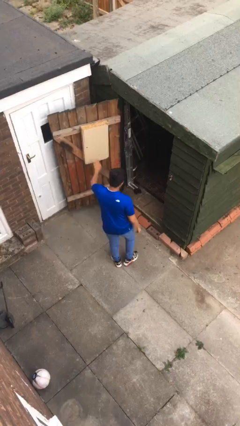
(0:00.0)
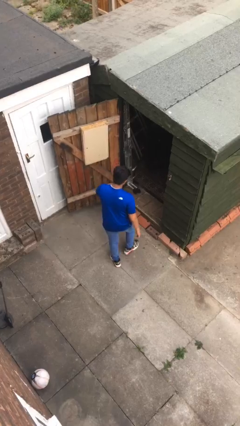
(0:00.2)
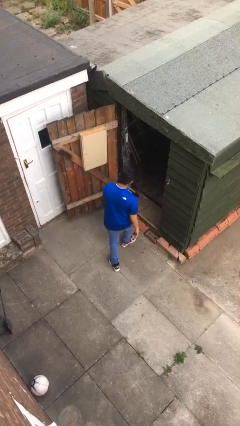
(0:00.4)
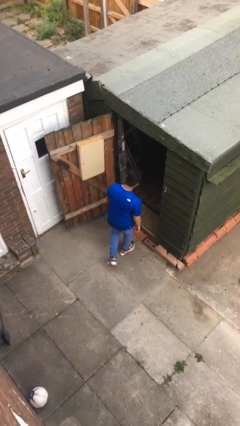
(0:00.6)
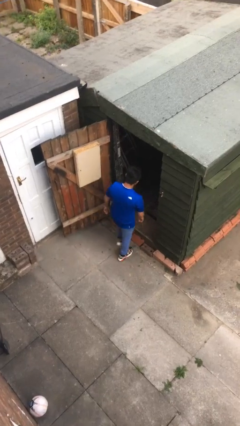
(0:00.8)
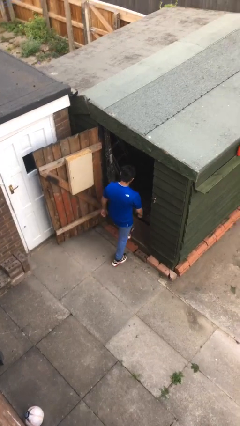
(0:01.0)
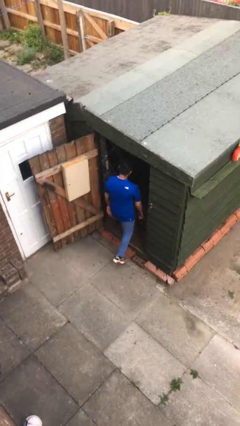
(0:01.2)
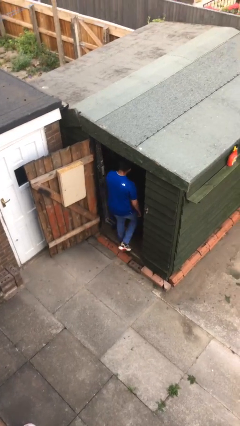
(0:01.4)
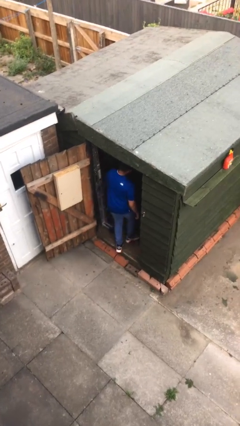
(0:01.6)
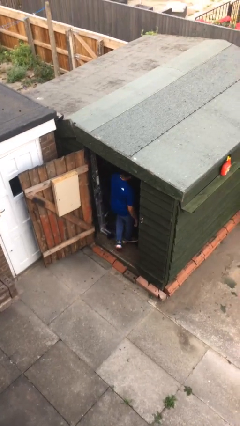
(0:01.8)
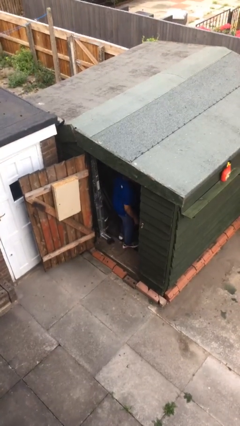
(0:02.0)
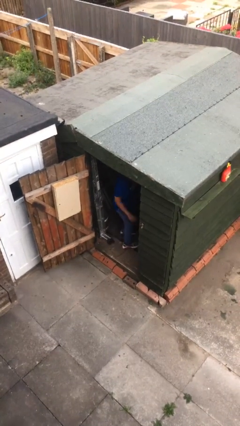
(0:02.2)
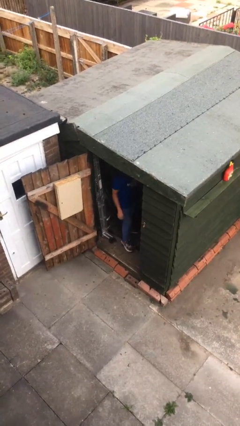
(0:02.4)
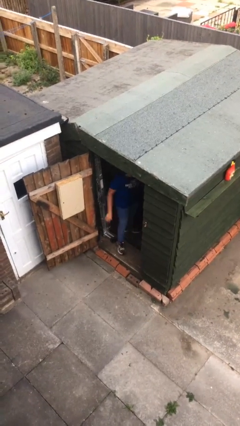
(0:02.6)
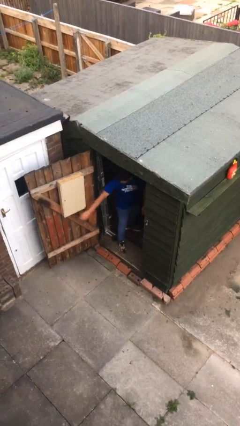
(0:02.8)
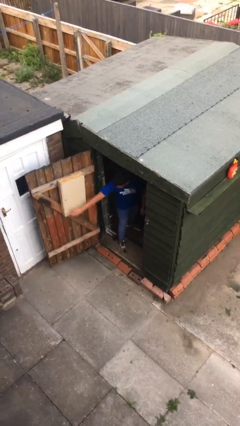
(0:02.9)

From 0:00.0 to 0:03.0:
person exits scene through structure

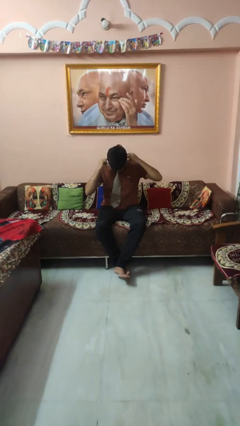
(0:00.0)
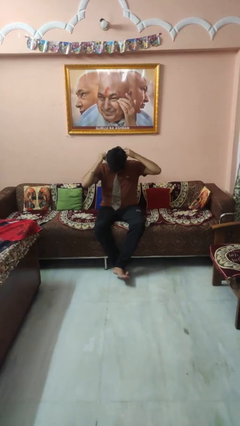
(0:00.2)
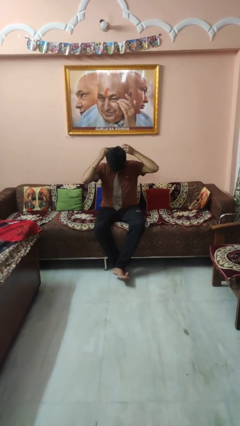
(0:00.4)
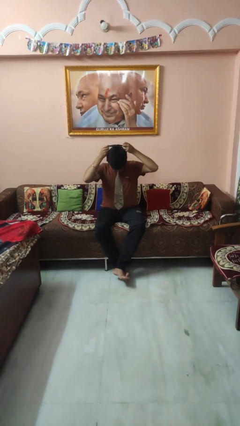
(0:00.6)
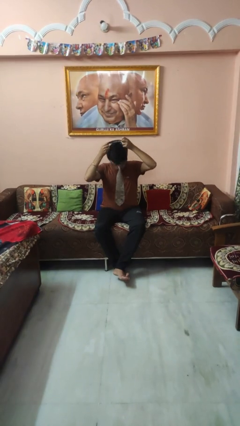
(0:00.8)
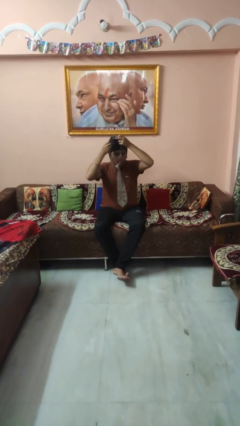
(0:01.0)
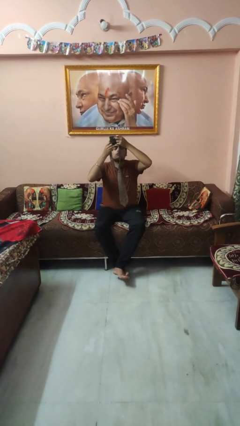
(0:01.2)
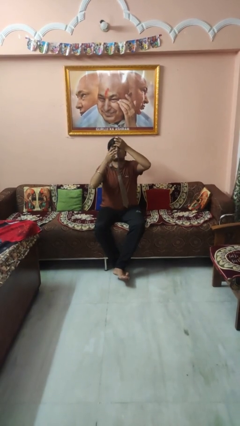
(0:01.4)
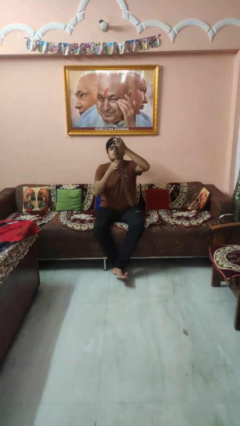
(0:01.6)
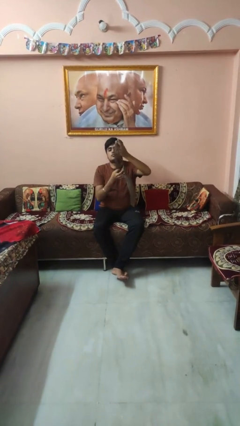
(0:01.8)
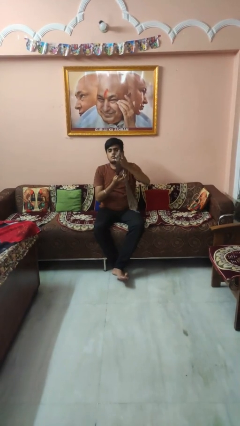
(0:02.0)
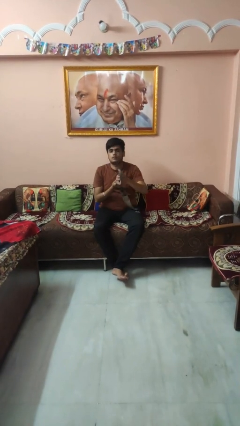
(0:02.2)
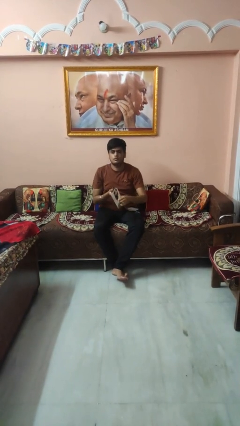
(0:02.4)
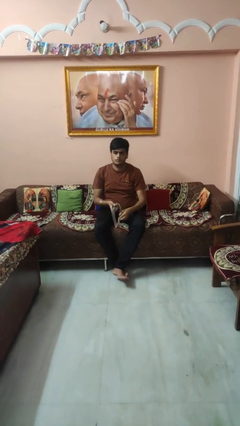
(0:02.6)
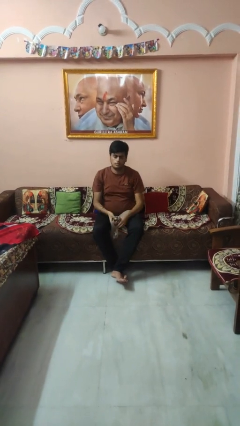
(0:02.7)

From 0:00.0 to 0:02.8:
person takes off necktie

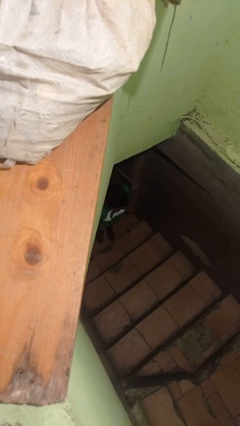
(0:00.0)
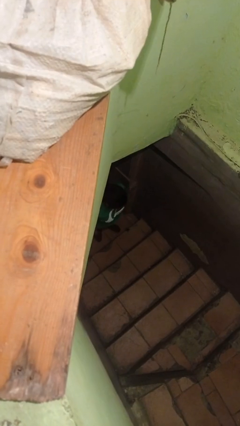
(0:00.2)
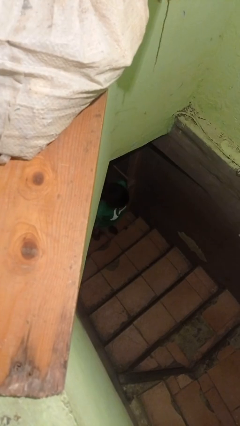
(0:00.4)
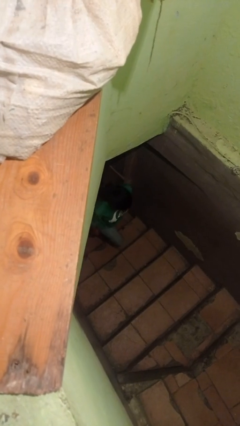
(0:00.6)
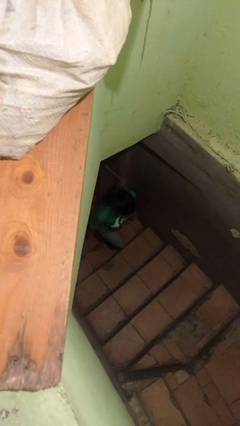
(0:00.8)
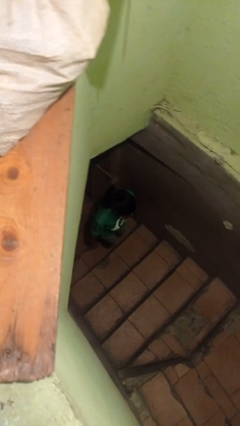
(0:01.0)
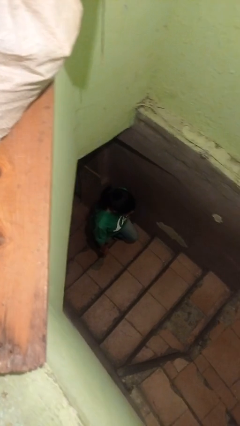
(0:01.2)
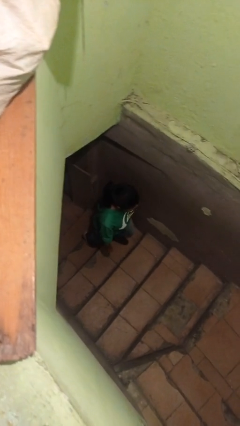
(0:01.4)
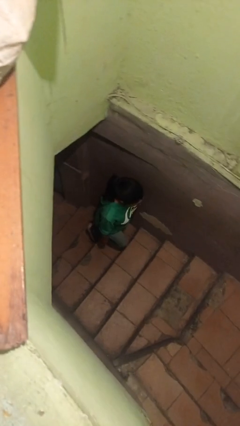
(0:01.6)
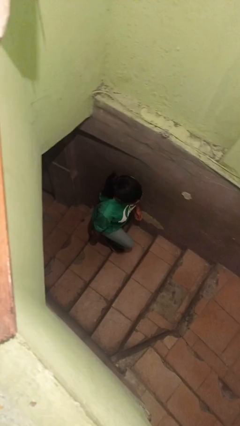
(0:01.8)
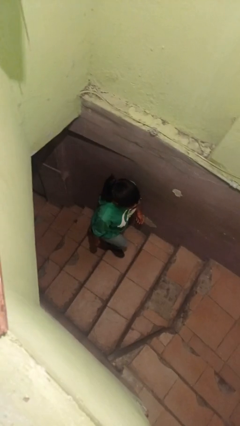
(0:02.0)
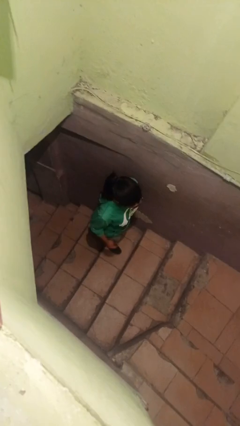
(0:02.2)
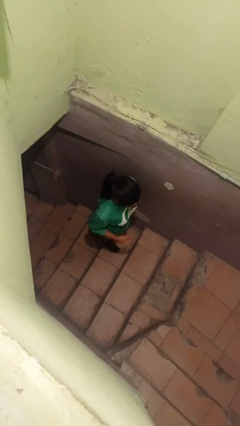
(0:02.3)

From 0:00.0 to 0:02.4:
person climbs up stairs

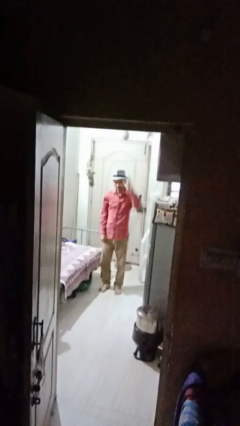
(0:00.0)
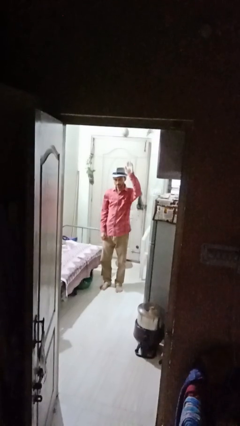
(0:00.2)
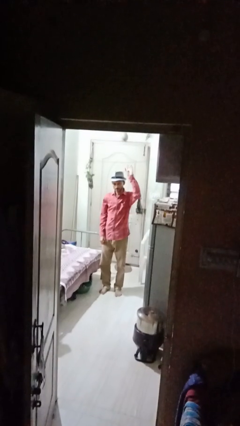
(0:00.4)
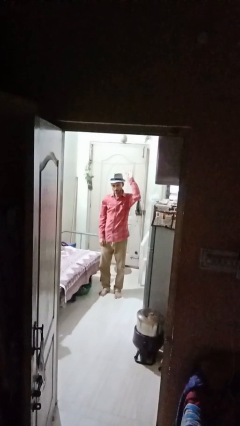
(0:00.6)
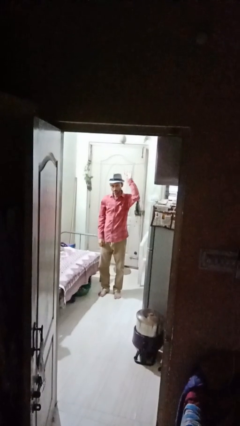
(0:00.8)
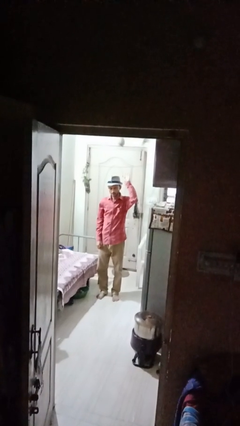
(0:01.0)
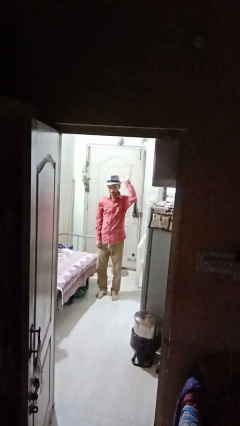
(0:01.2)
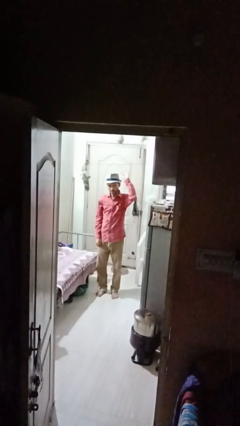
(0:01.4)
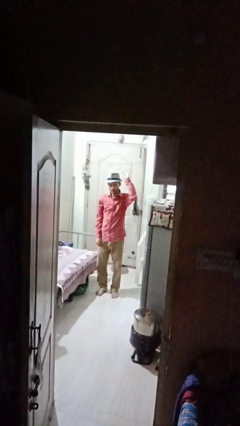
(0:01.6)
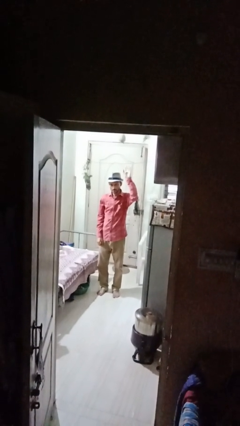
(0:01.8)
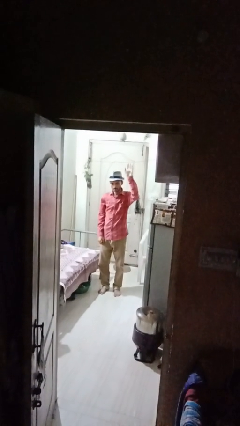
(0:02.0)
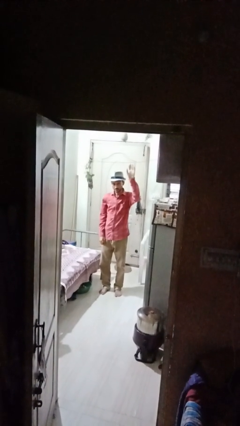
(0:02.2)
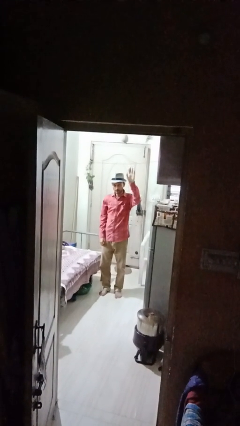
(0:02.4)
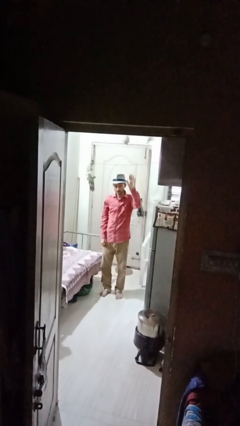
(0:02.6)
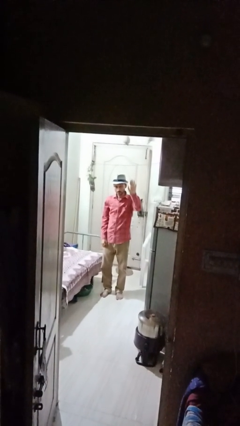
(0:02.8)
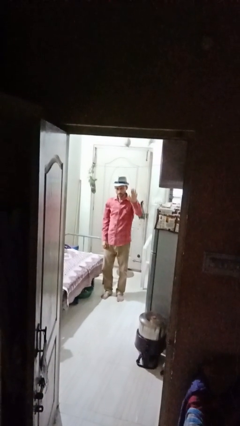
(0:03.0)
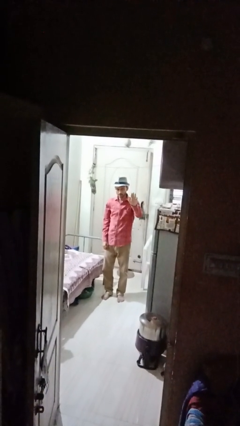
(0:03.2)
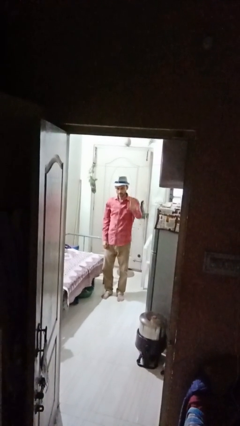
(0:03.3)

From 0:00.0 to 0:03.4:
person gestures raise hand

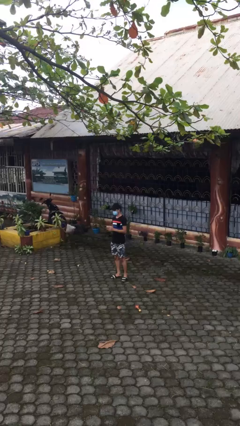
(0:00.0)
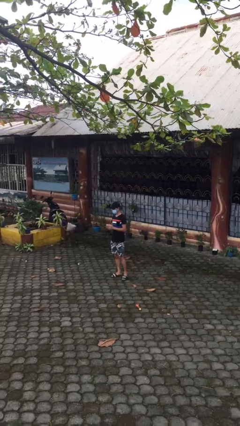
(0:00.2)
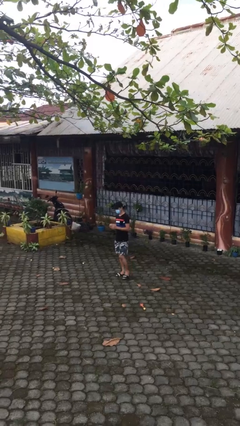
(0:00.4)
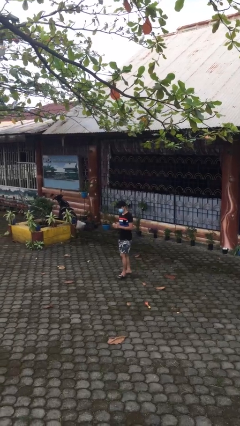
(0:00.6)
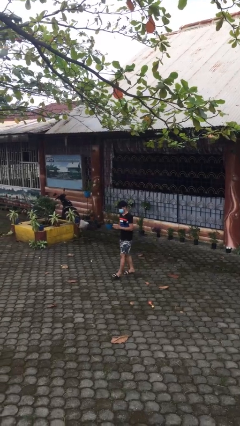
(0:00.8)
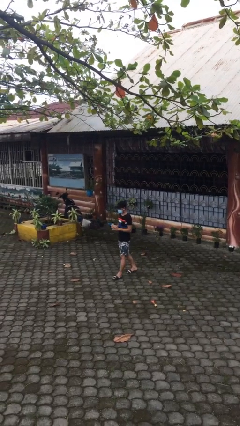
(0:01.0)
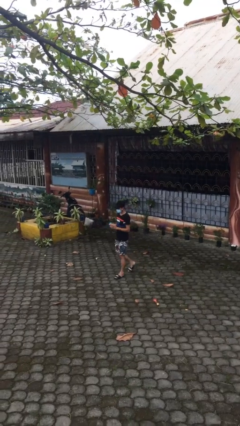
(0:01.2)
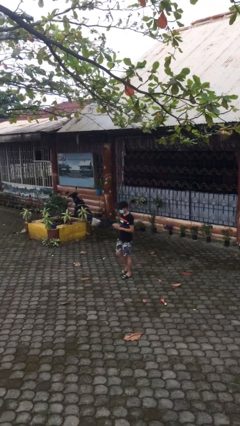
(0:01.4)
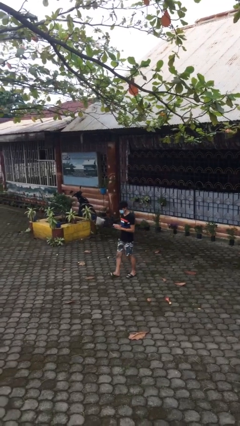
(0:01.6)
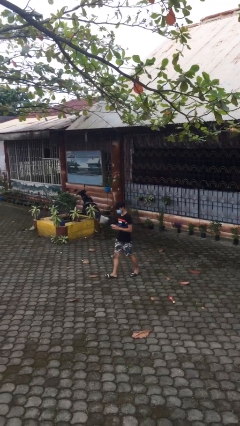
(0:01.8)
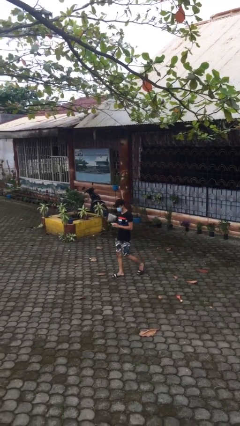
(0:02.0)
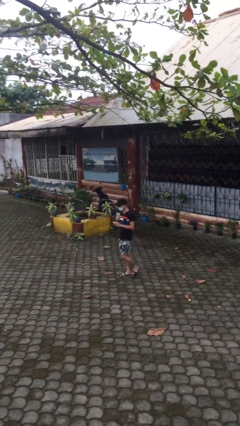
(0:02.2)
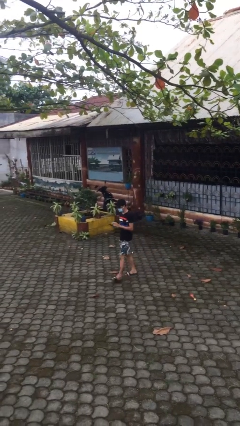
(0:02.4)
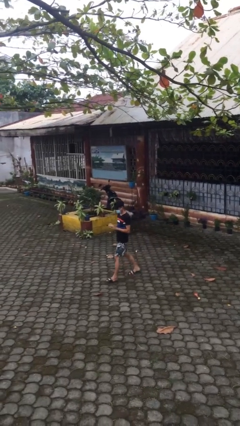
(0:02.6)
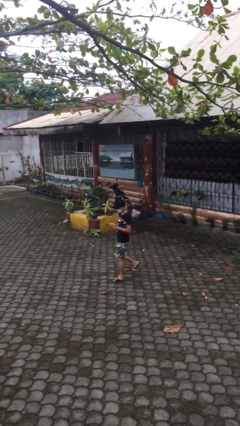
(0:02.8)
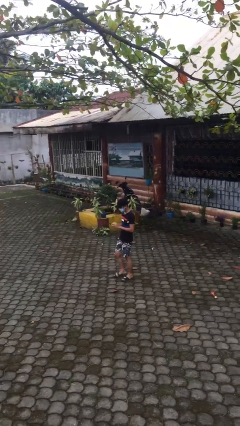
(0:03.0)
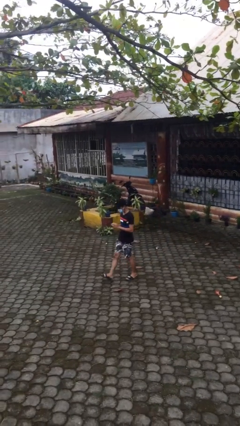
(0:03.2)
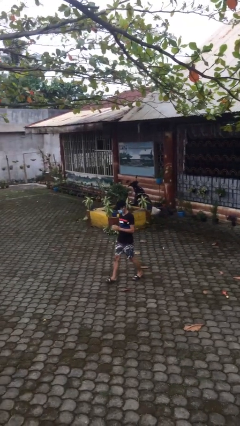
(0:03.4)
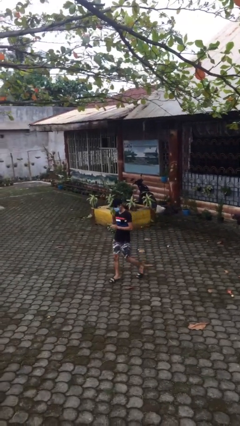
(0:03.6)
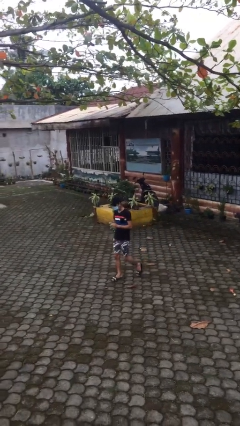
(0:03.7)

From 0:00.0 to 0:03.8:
person texts on phone

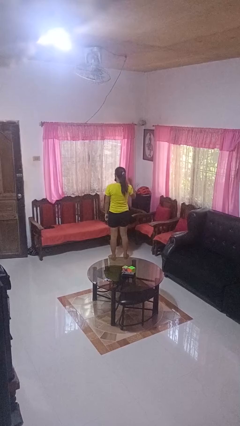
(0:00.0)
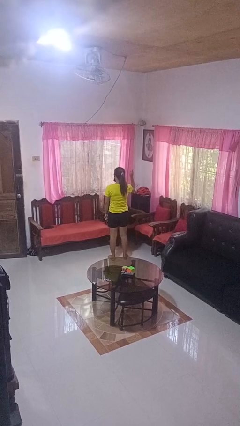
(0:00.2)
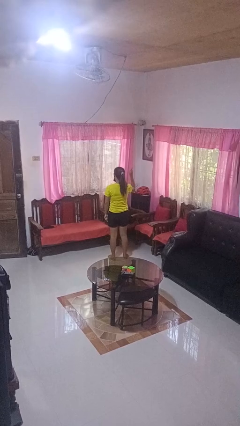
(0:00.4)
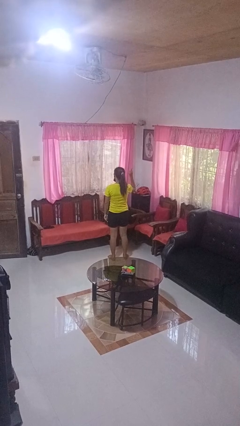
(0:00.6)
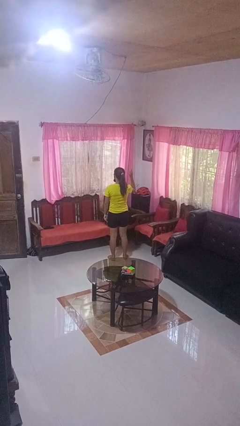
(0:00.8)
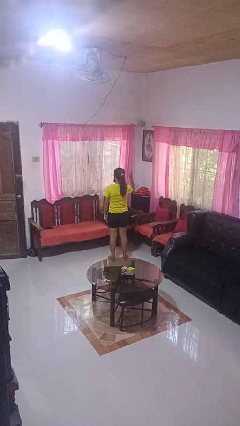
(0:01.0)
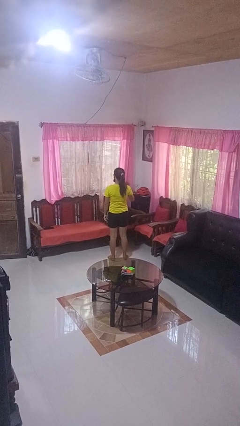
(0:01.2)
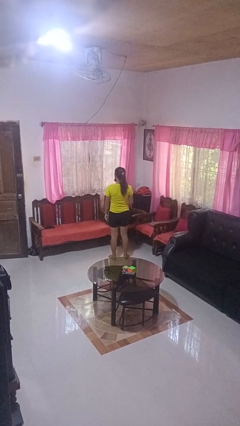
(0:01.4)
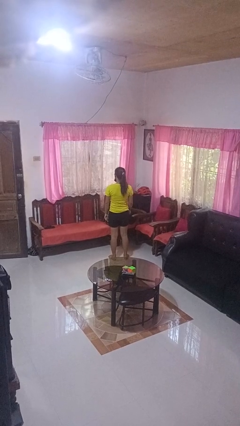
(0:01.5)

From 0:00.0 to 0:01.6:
person gestures number one

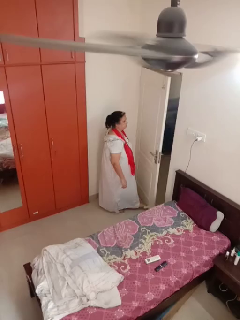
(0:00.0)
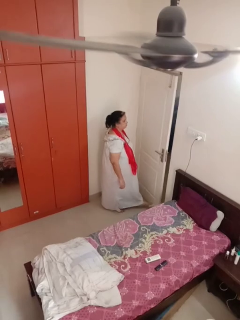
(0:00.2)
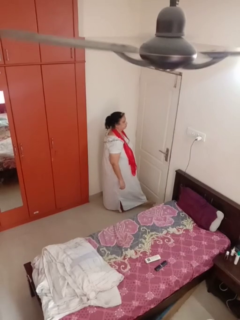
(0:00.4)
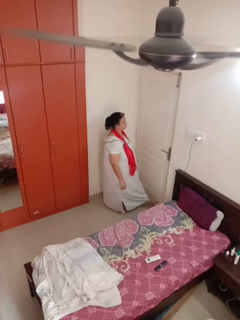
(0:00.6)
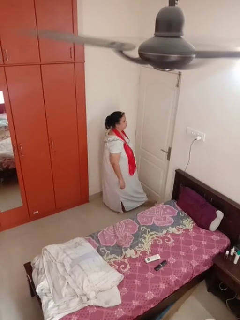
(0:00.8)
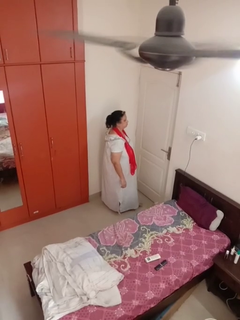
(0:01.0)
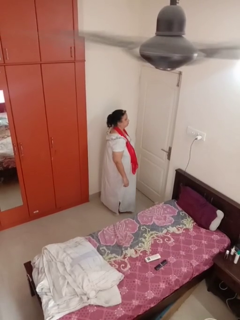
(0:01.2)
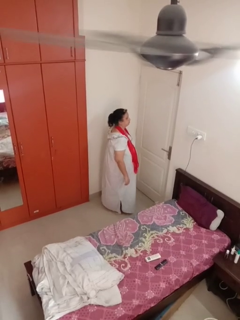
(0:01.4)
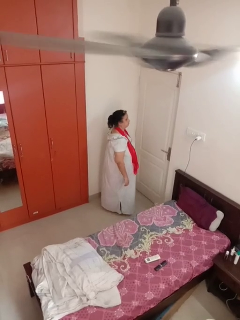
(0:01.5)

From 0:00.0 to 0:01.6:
person closes door with foot
